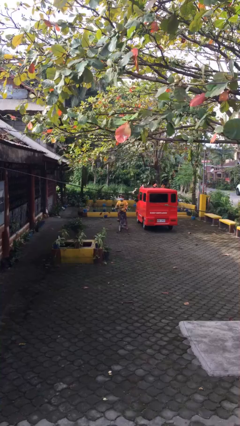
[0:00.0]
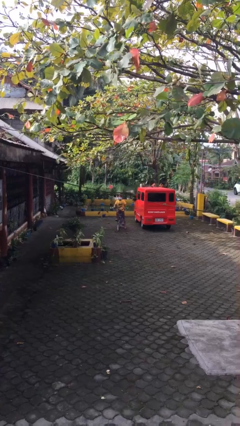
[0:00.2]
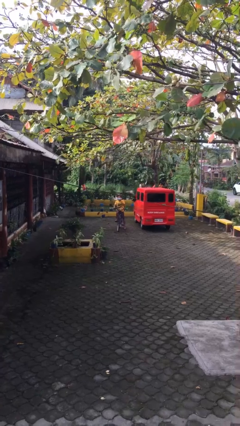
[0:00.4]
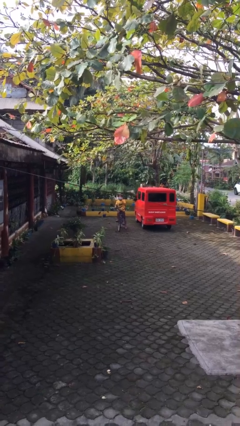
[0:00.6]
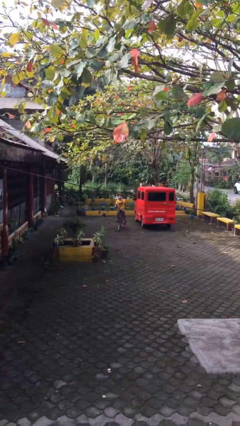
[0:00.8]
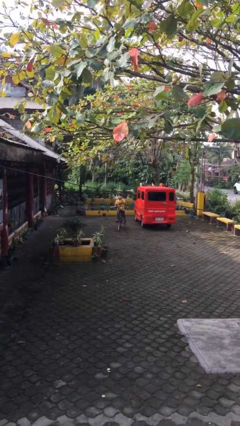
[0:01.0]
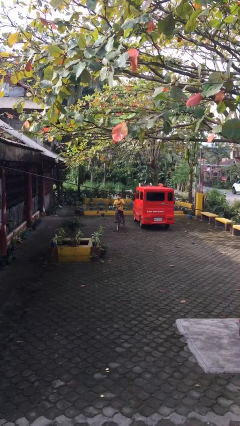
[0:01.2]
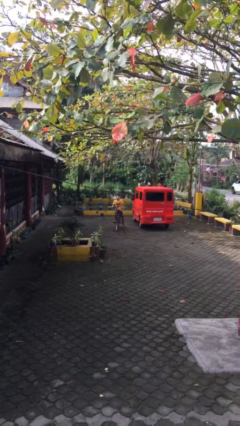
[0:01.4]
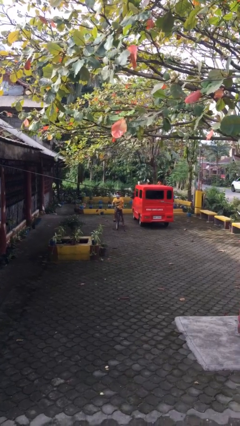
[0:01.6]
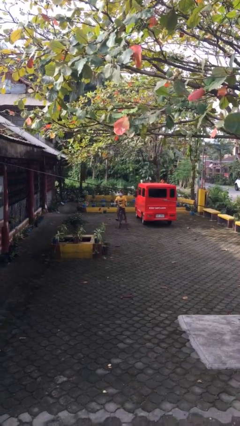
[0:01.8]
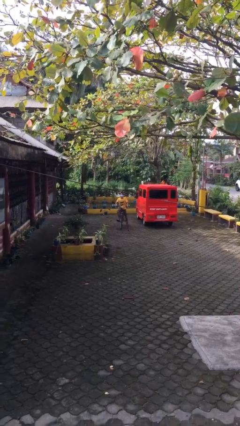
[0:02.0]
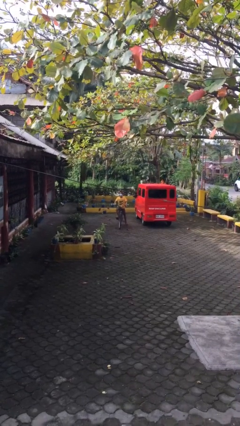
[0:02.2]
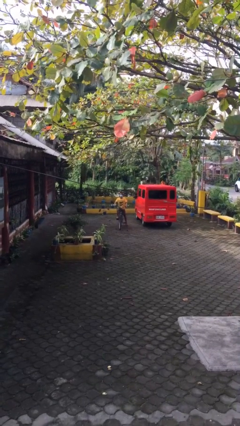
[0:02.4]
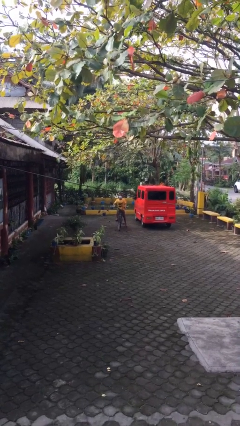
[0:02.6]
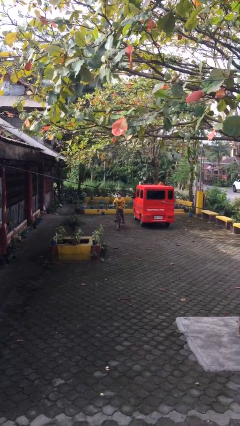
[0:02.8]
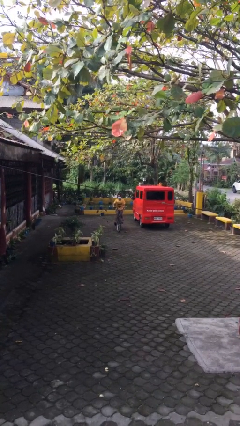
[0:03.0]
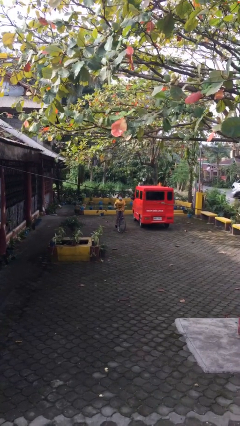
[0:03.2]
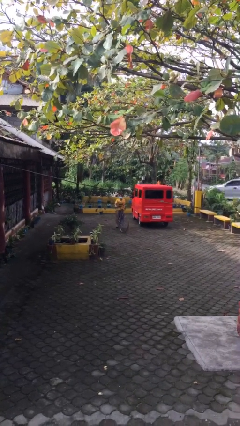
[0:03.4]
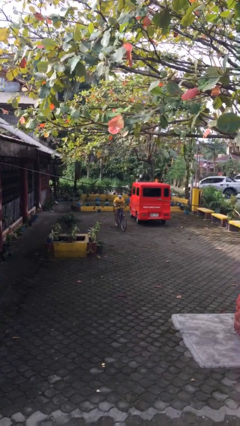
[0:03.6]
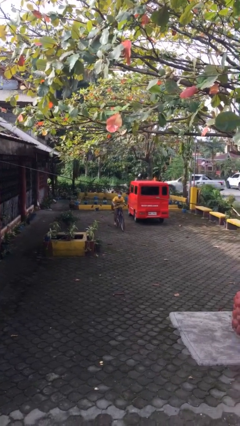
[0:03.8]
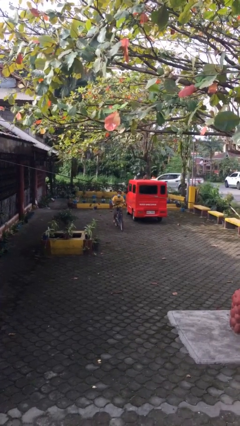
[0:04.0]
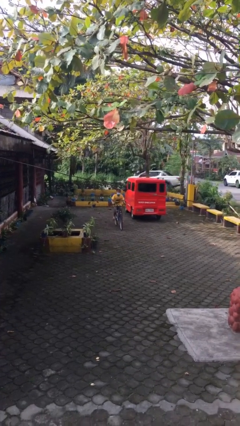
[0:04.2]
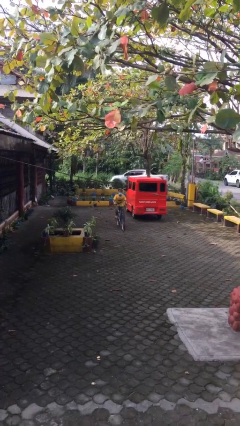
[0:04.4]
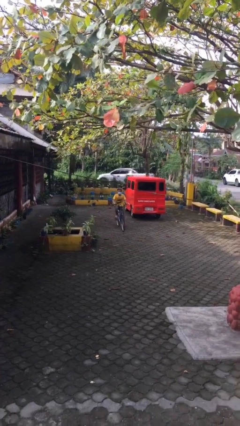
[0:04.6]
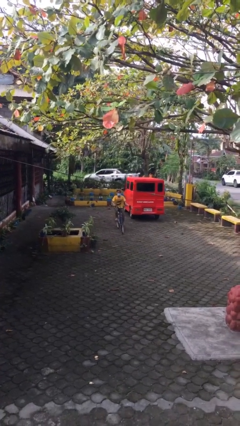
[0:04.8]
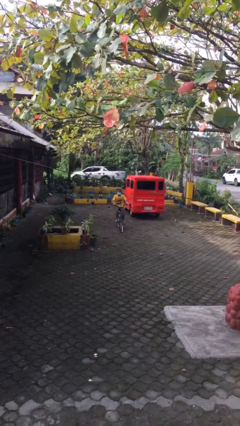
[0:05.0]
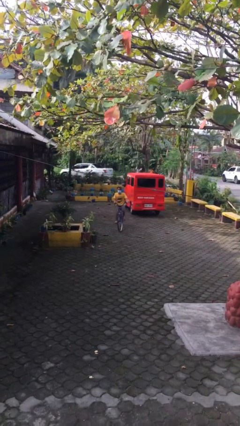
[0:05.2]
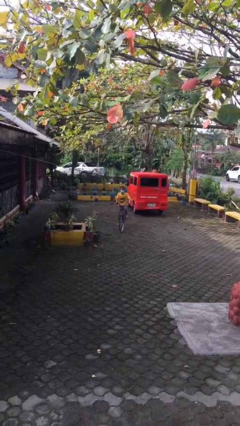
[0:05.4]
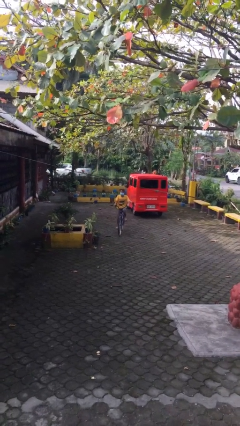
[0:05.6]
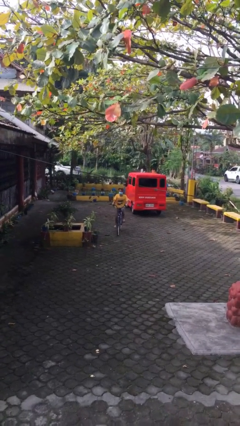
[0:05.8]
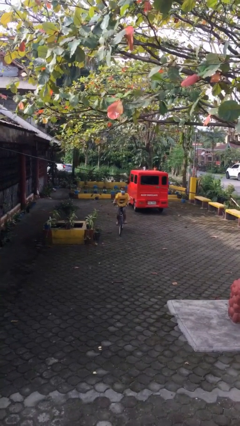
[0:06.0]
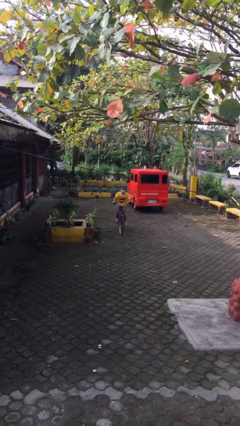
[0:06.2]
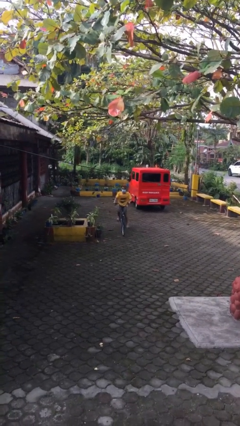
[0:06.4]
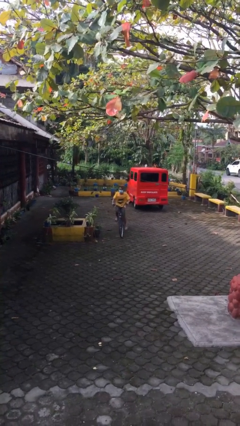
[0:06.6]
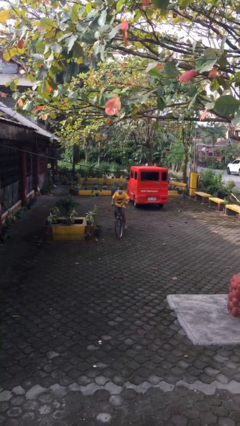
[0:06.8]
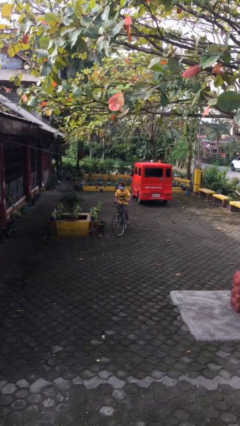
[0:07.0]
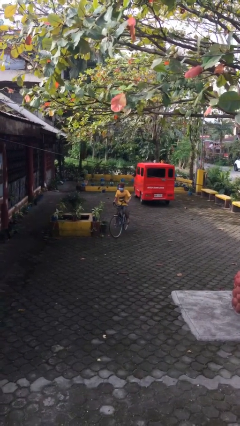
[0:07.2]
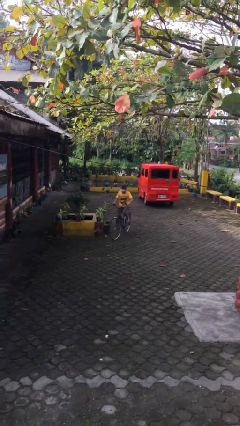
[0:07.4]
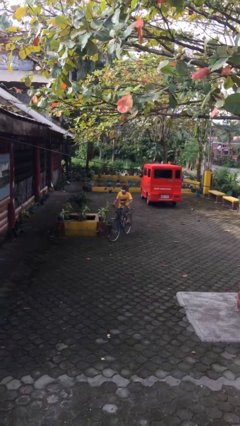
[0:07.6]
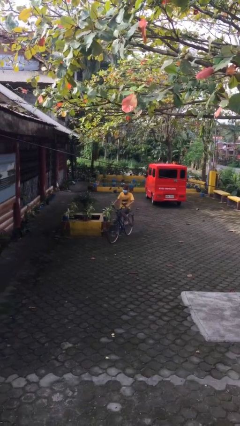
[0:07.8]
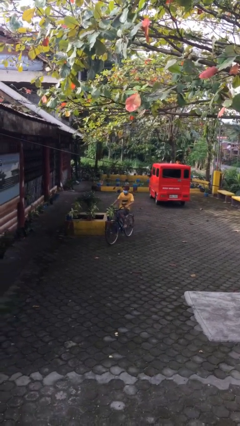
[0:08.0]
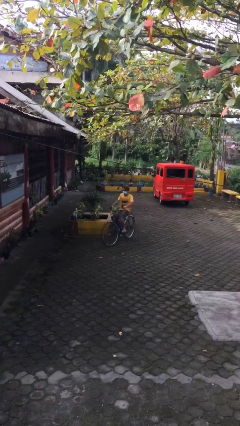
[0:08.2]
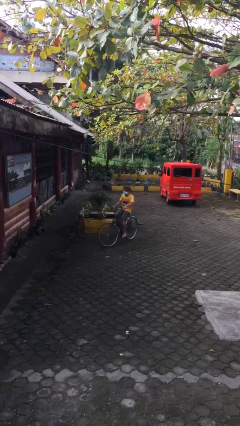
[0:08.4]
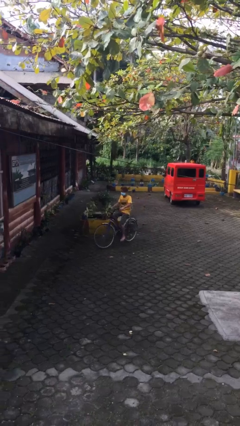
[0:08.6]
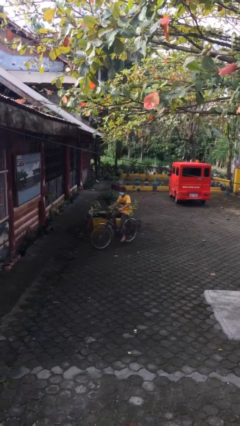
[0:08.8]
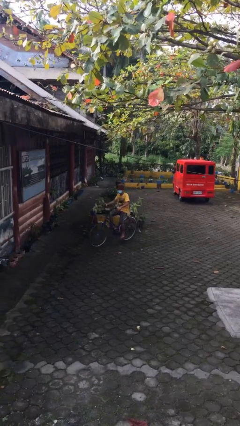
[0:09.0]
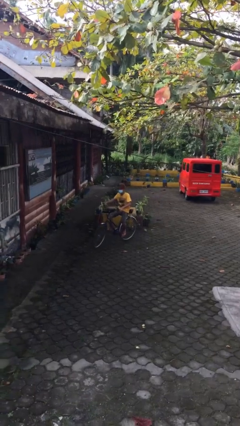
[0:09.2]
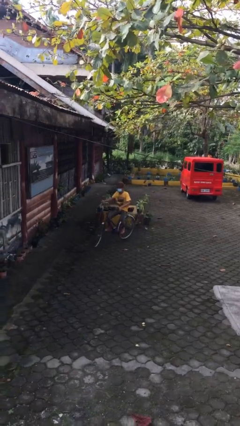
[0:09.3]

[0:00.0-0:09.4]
person rides bicycle

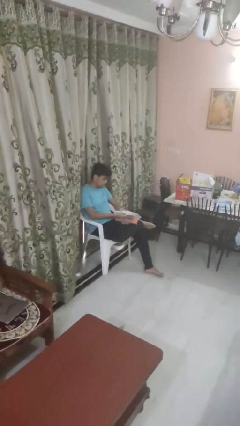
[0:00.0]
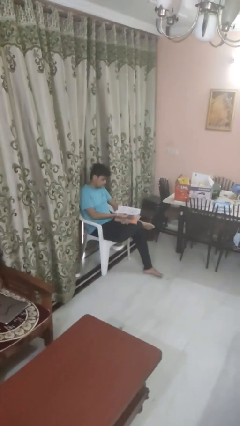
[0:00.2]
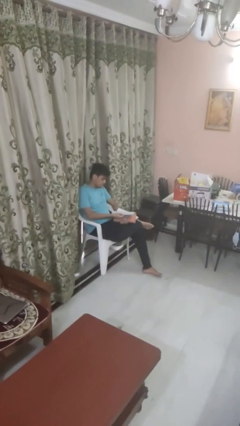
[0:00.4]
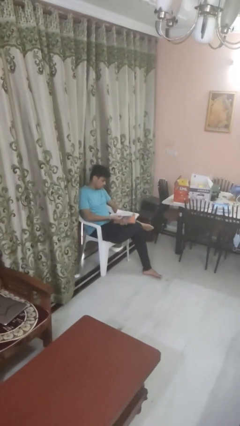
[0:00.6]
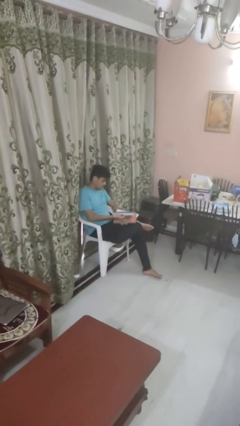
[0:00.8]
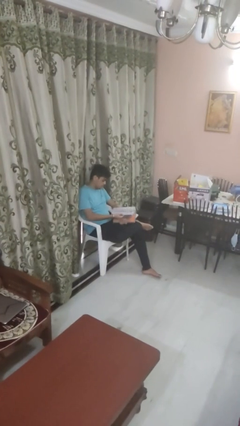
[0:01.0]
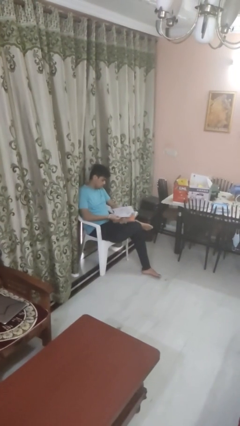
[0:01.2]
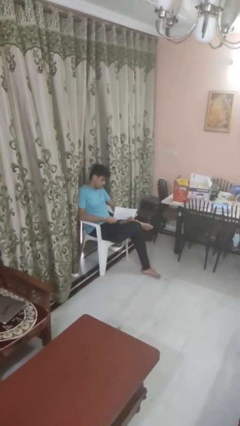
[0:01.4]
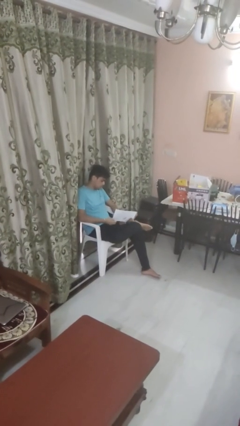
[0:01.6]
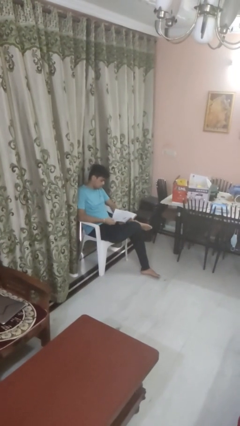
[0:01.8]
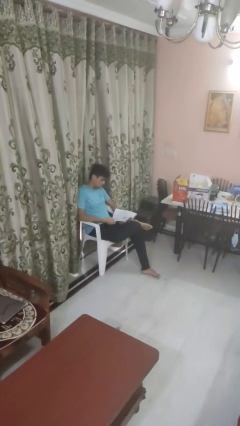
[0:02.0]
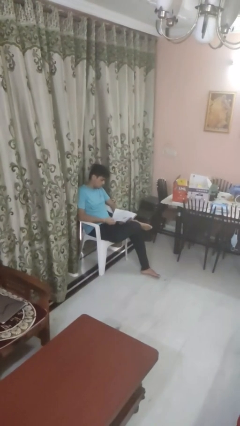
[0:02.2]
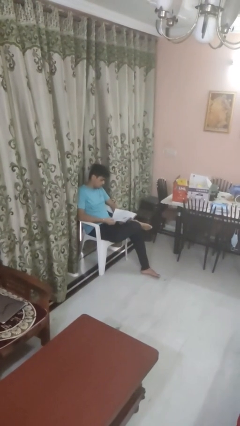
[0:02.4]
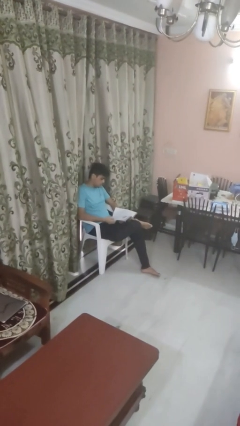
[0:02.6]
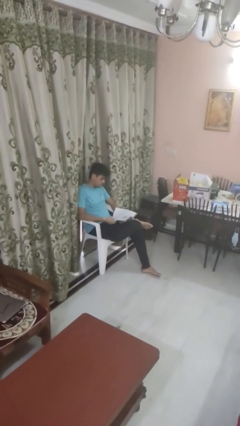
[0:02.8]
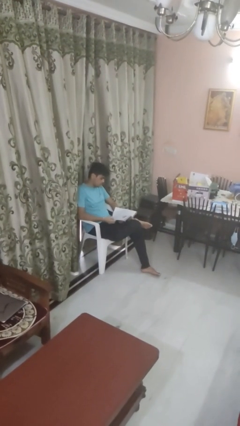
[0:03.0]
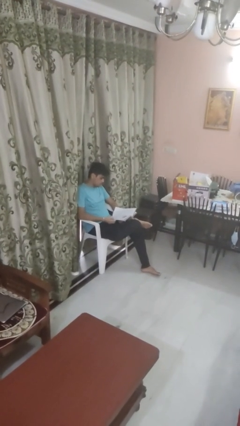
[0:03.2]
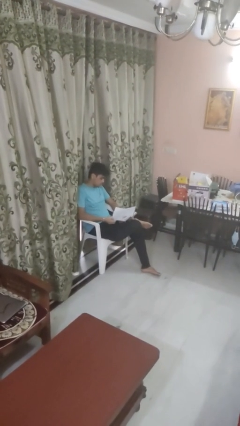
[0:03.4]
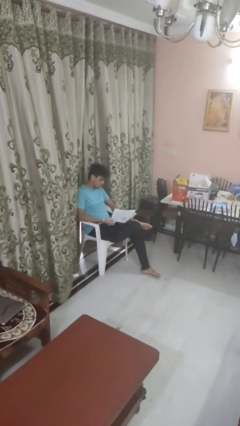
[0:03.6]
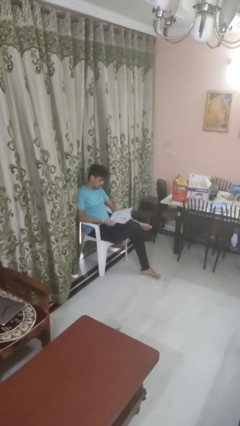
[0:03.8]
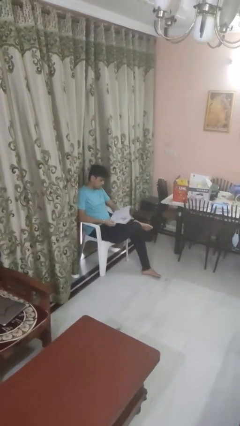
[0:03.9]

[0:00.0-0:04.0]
person reads magazine

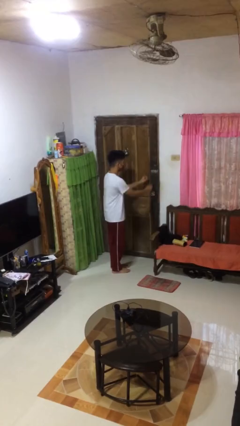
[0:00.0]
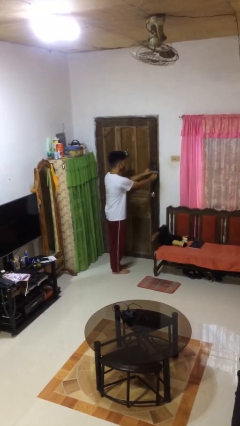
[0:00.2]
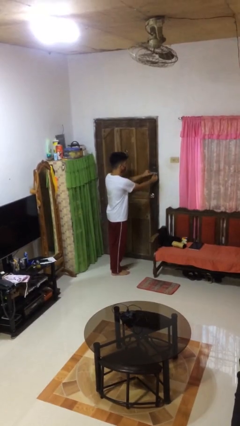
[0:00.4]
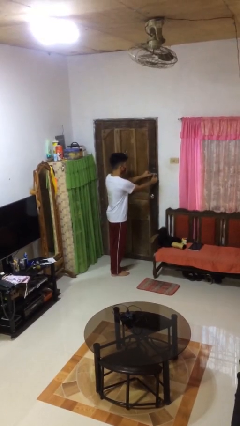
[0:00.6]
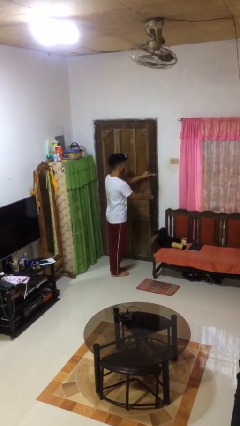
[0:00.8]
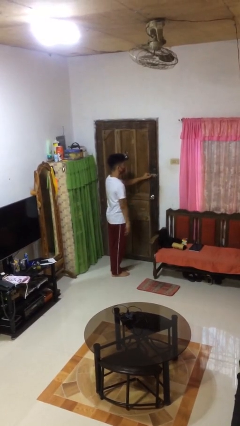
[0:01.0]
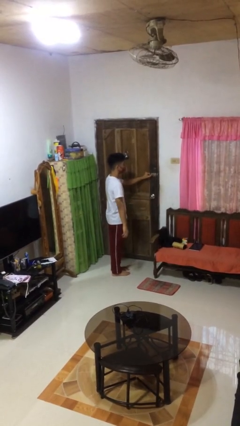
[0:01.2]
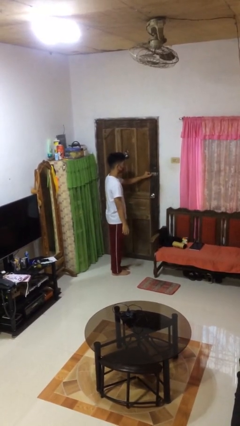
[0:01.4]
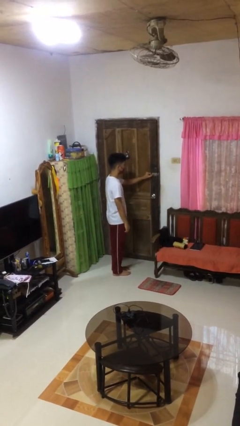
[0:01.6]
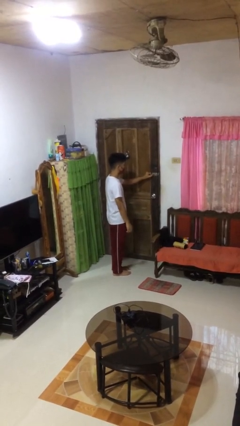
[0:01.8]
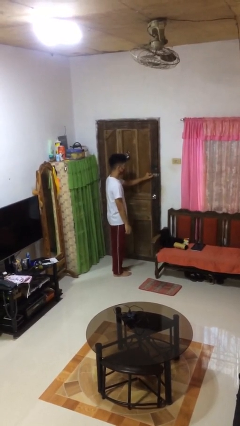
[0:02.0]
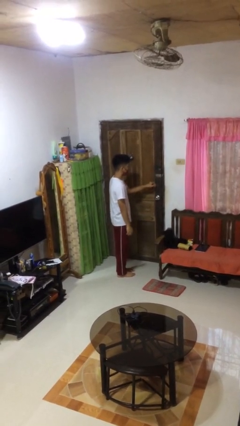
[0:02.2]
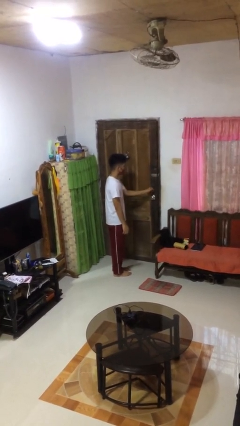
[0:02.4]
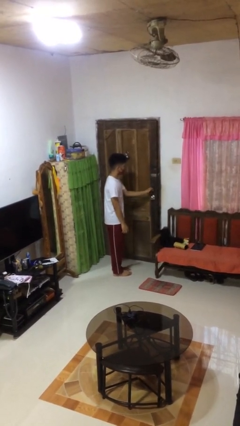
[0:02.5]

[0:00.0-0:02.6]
person unlocks door with keys

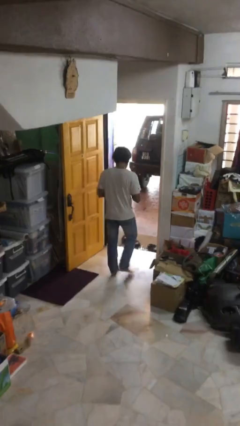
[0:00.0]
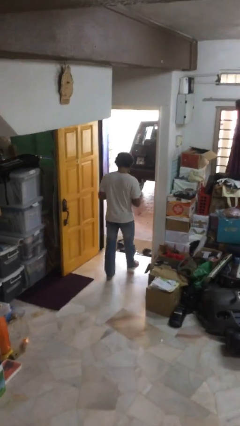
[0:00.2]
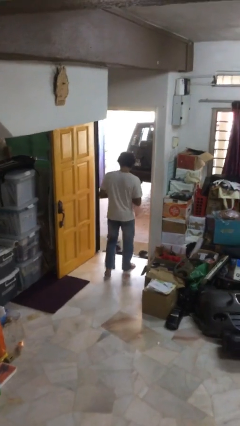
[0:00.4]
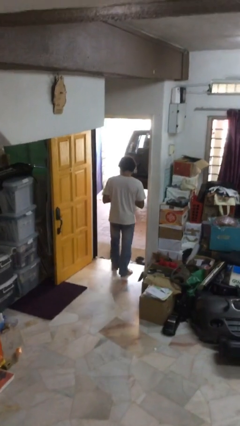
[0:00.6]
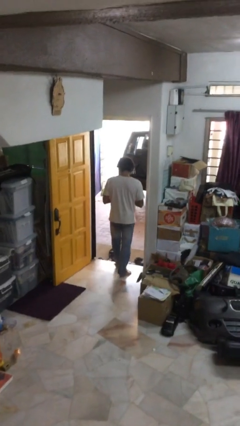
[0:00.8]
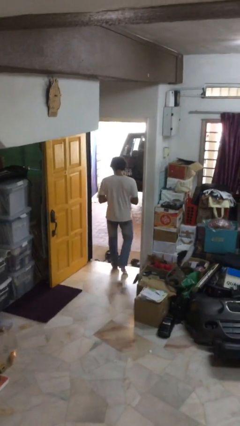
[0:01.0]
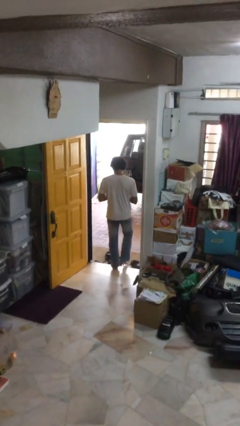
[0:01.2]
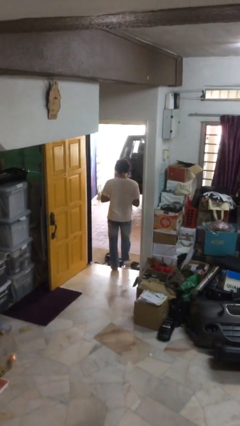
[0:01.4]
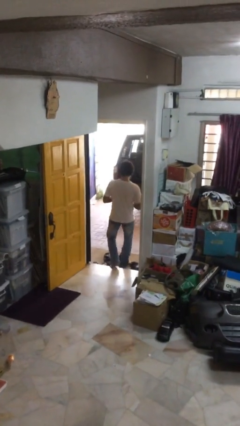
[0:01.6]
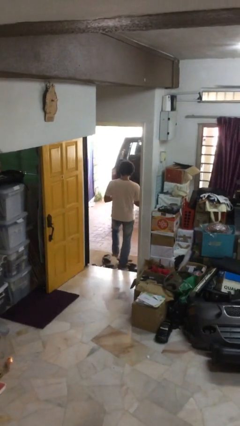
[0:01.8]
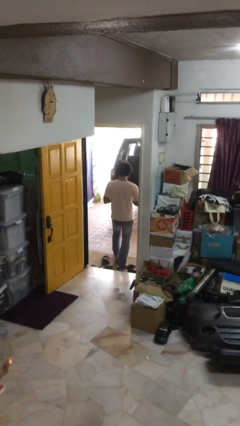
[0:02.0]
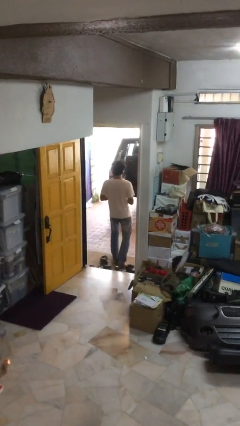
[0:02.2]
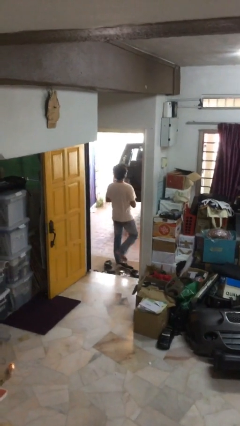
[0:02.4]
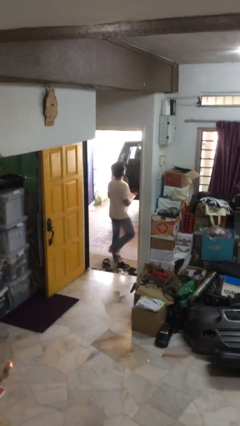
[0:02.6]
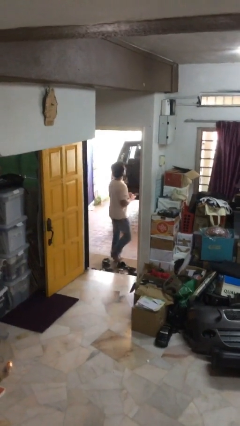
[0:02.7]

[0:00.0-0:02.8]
person exits scene through structure
